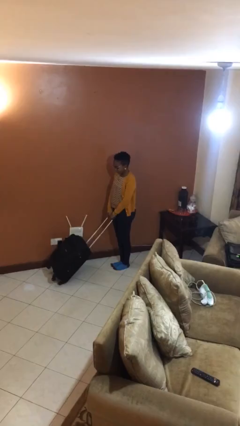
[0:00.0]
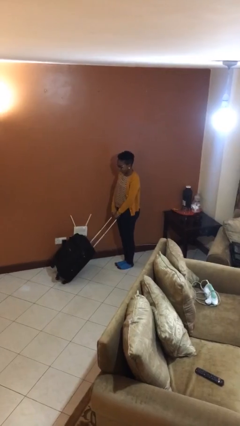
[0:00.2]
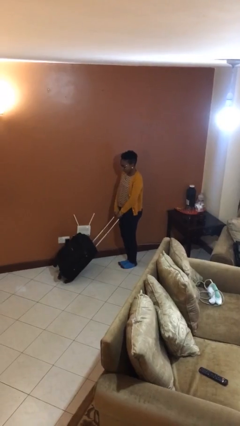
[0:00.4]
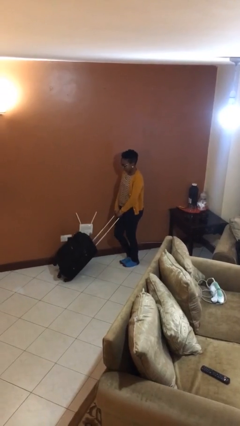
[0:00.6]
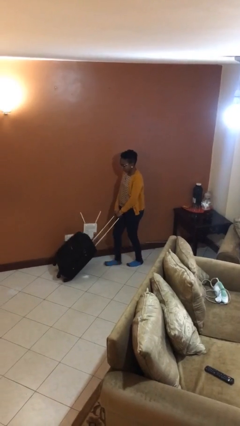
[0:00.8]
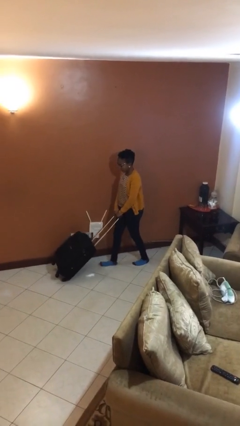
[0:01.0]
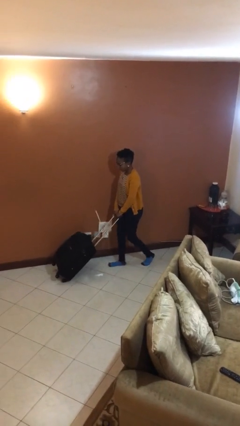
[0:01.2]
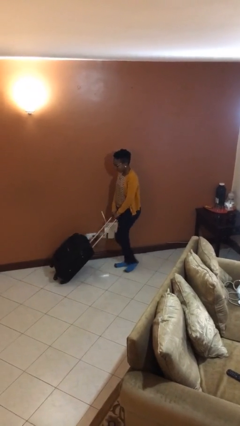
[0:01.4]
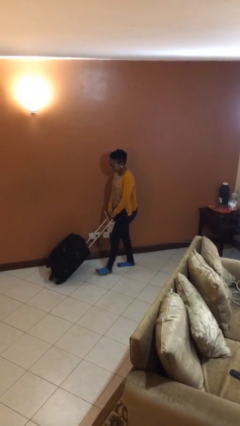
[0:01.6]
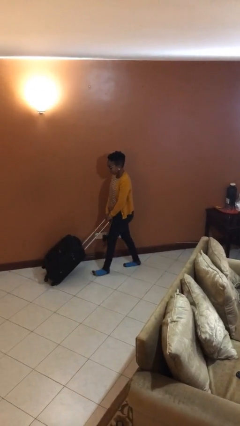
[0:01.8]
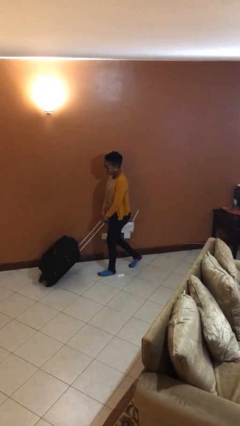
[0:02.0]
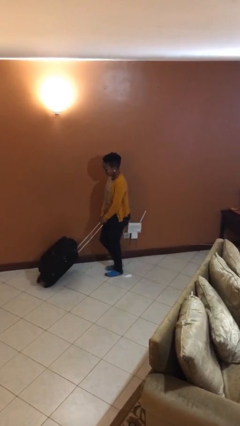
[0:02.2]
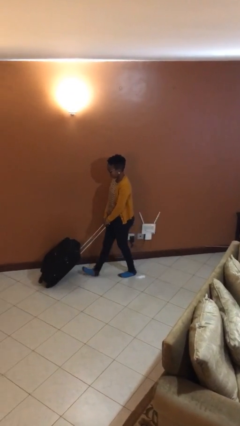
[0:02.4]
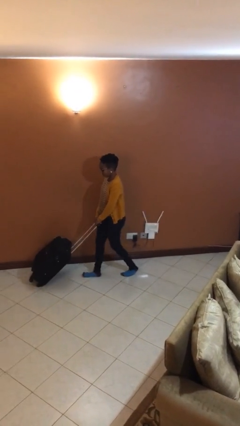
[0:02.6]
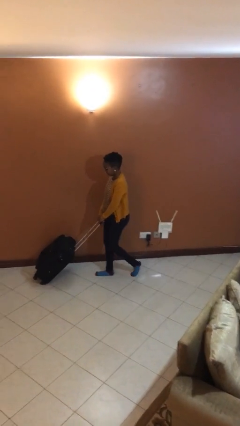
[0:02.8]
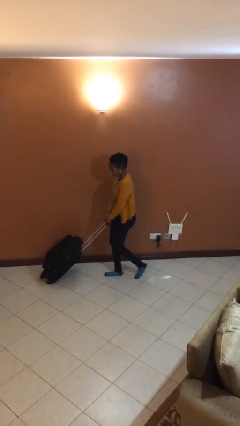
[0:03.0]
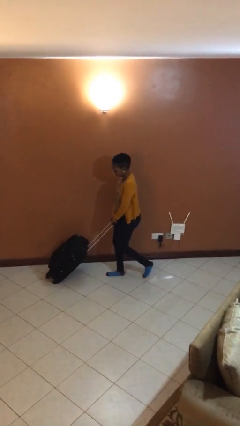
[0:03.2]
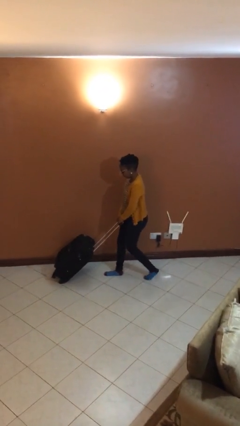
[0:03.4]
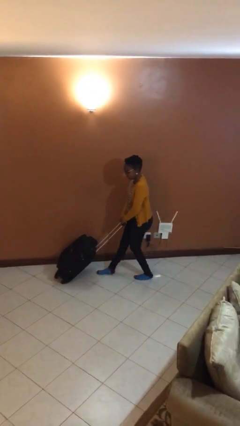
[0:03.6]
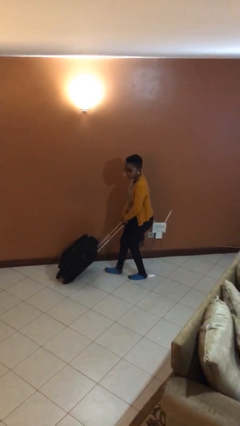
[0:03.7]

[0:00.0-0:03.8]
person pushes wheeled cart

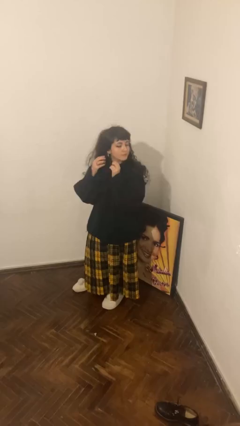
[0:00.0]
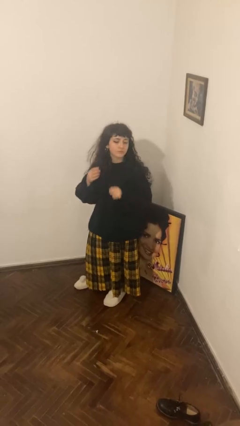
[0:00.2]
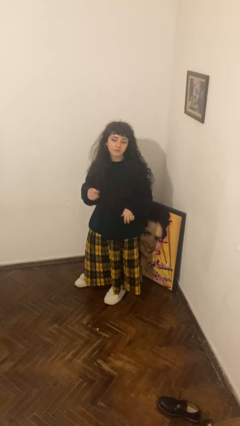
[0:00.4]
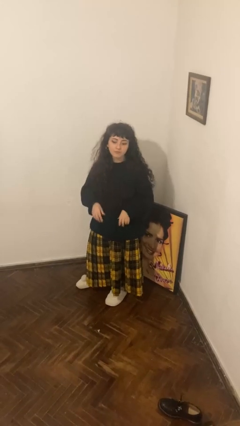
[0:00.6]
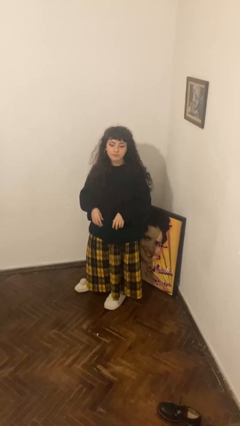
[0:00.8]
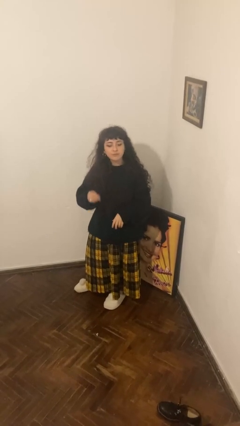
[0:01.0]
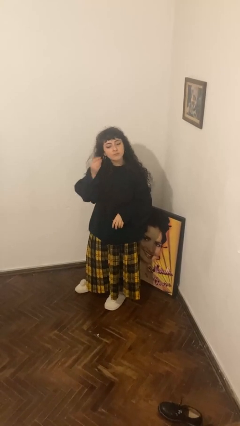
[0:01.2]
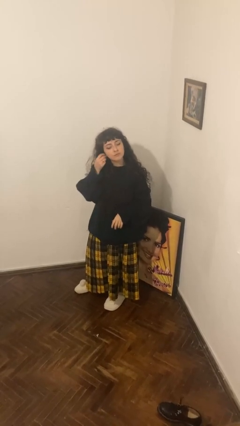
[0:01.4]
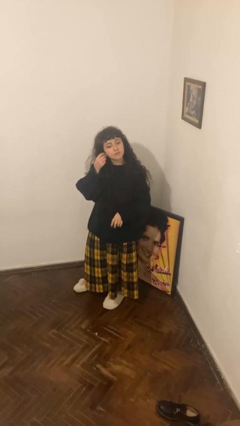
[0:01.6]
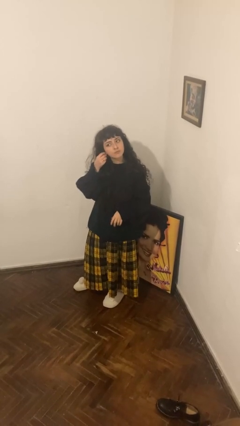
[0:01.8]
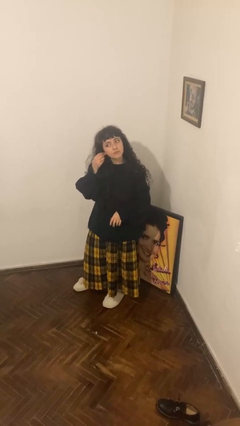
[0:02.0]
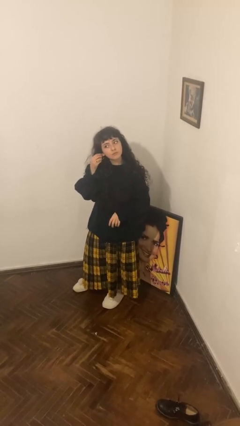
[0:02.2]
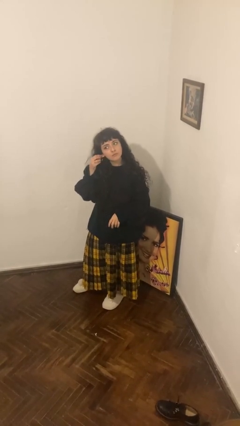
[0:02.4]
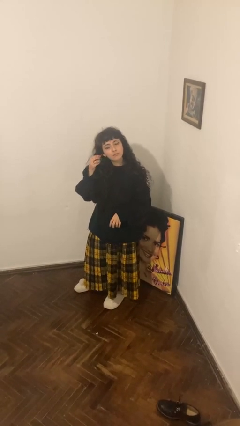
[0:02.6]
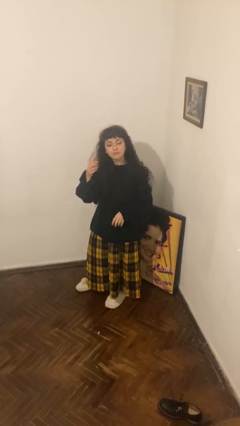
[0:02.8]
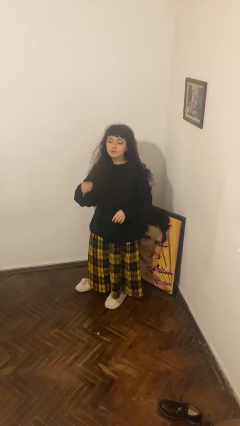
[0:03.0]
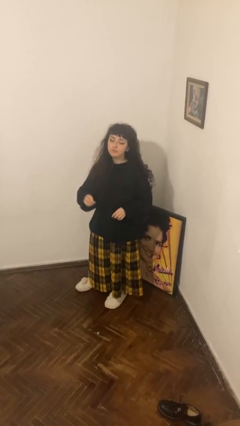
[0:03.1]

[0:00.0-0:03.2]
person takes off earrings

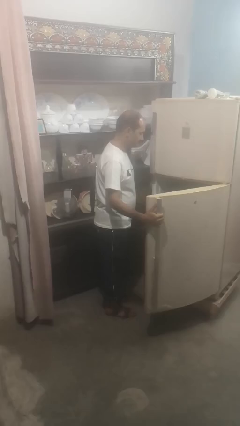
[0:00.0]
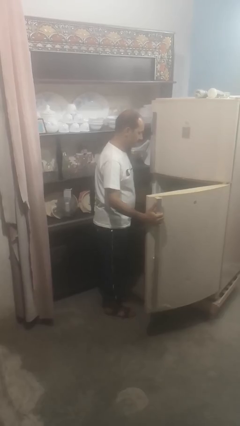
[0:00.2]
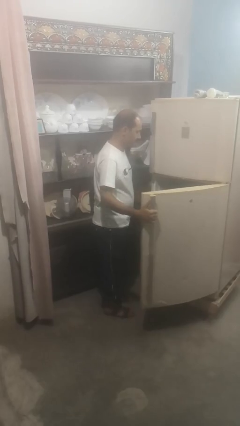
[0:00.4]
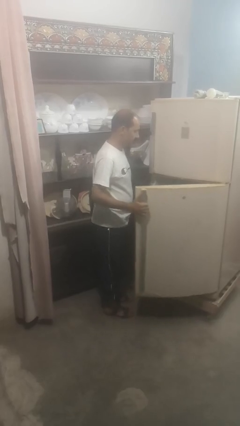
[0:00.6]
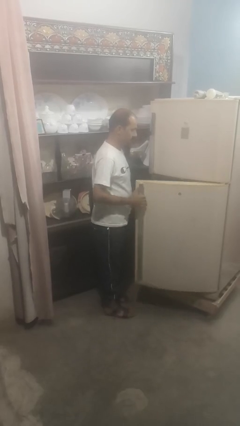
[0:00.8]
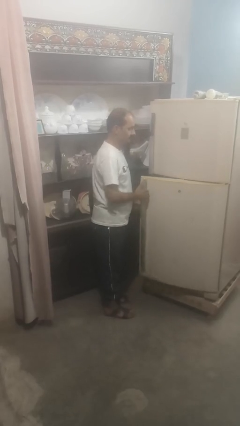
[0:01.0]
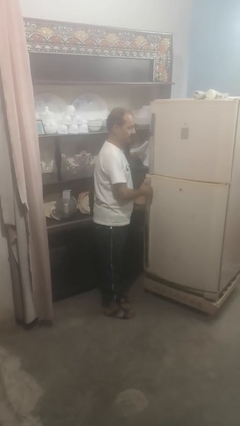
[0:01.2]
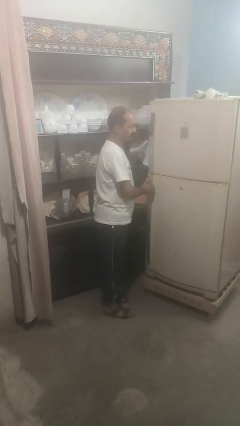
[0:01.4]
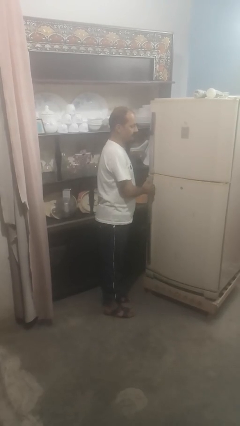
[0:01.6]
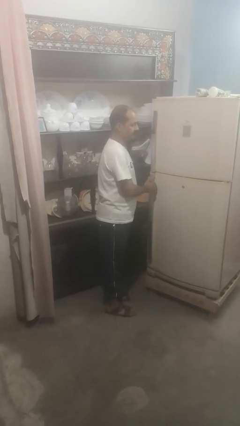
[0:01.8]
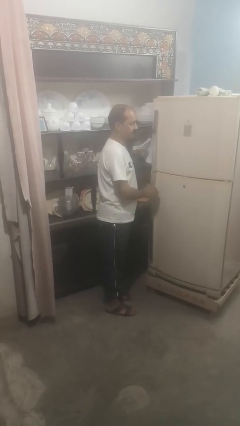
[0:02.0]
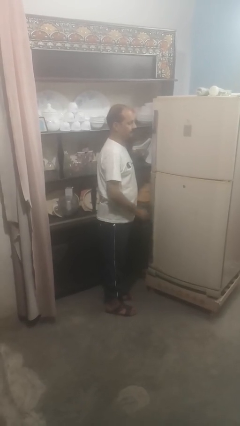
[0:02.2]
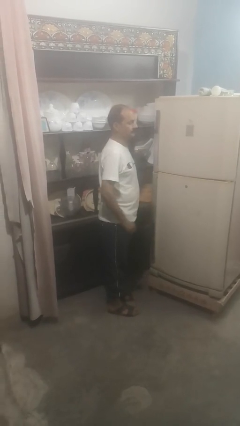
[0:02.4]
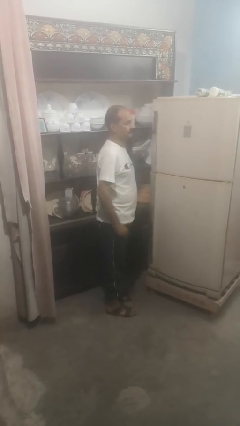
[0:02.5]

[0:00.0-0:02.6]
person closes refrigerator

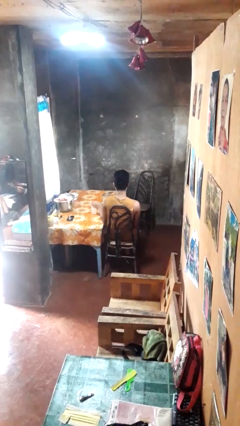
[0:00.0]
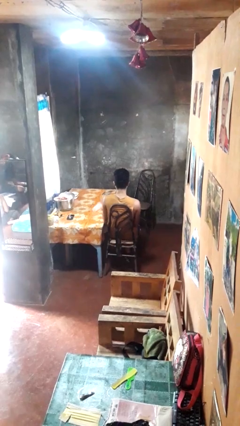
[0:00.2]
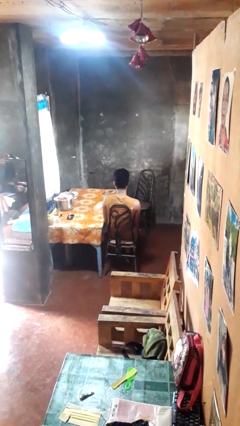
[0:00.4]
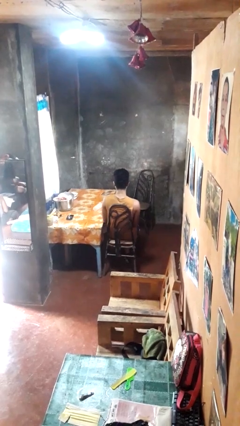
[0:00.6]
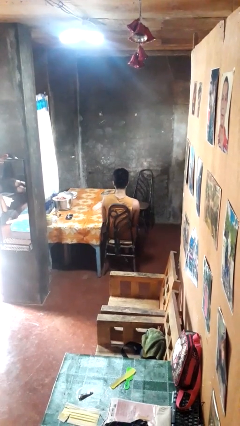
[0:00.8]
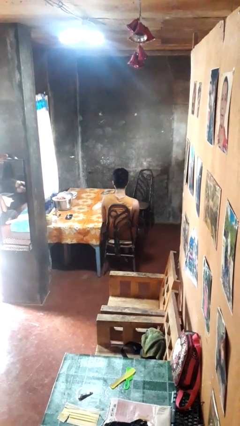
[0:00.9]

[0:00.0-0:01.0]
person knocks over glass

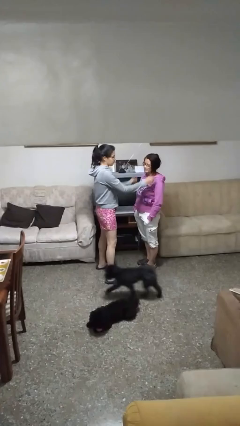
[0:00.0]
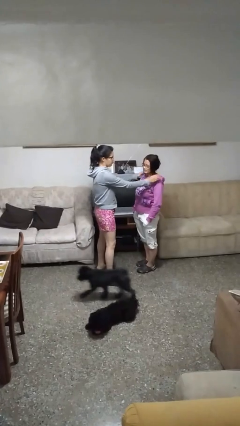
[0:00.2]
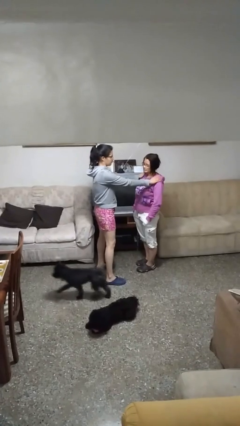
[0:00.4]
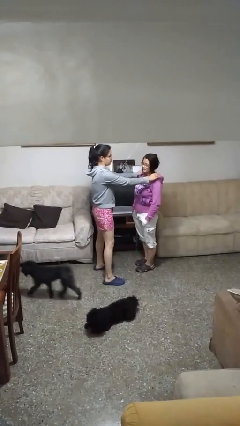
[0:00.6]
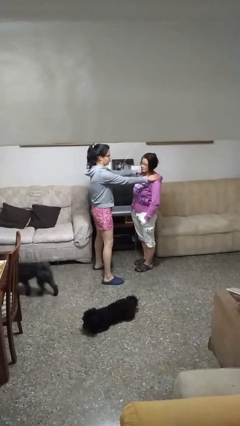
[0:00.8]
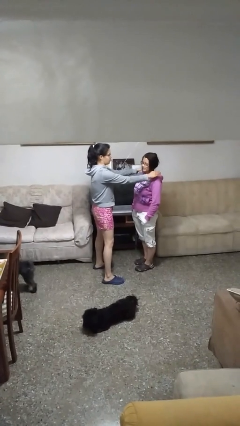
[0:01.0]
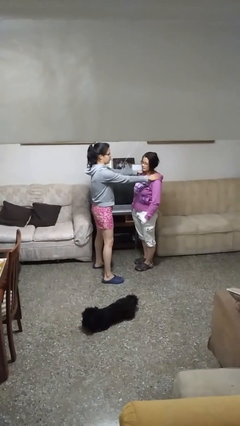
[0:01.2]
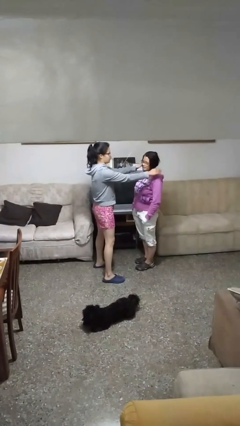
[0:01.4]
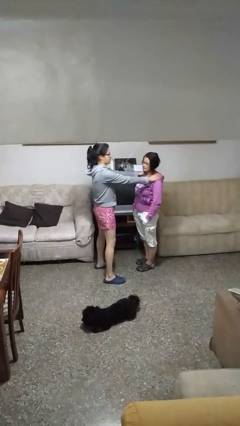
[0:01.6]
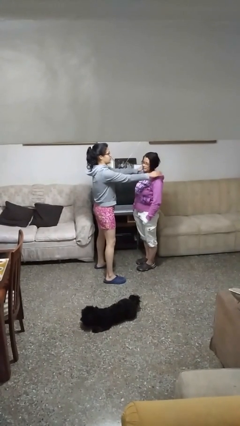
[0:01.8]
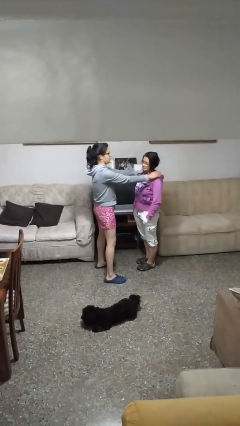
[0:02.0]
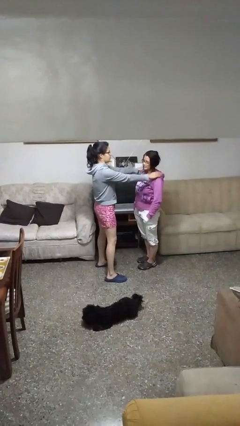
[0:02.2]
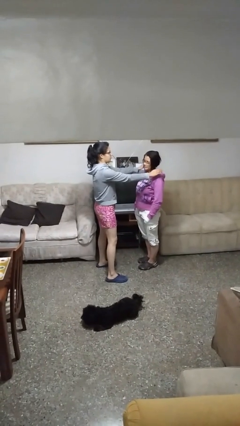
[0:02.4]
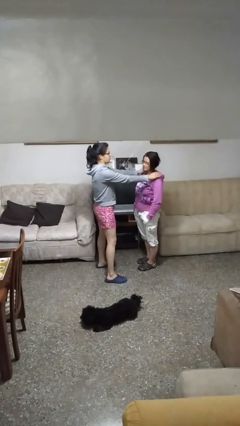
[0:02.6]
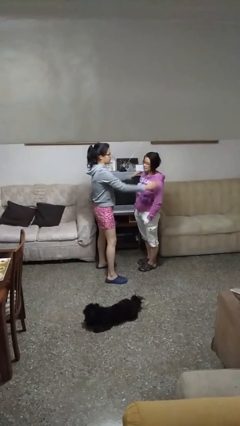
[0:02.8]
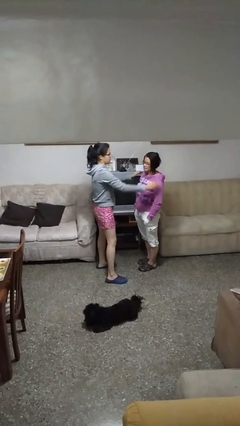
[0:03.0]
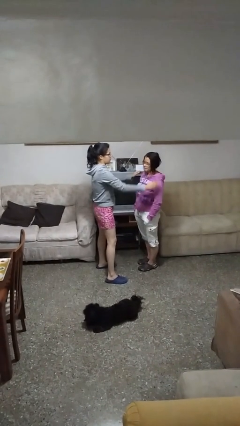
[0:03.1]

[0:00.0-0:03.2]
person pounds shoulders of person

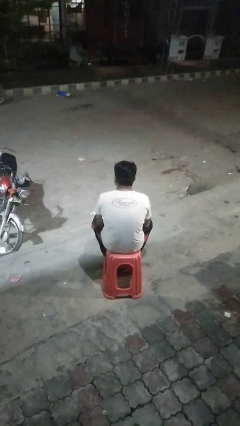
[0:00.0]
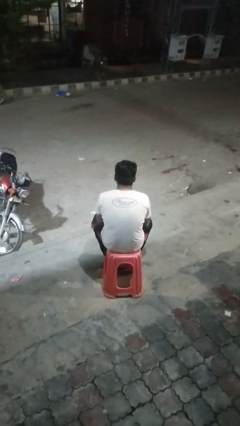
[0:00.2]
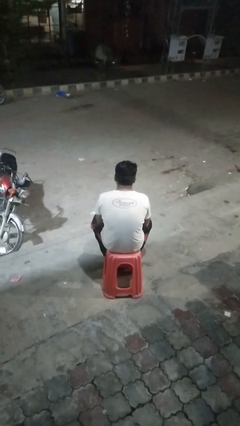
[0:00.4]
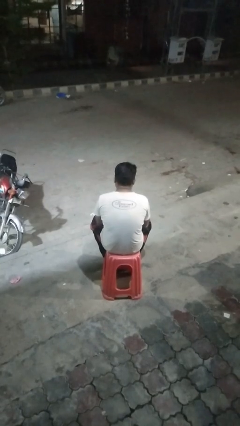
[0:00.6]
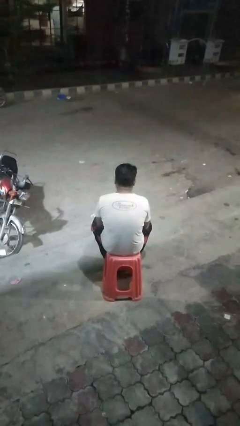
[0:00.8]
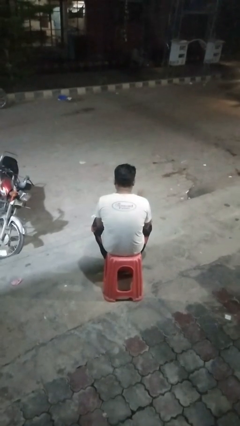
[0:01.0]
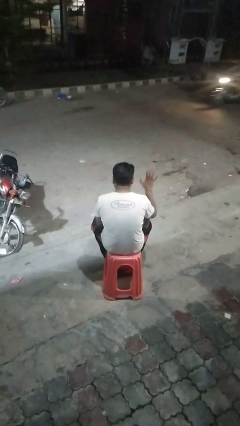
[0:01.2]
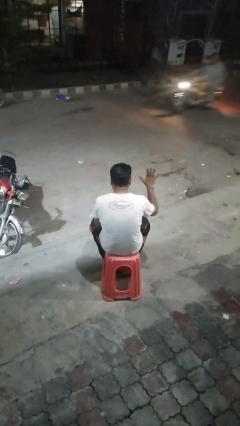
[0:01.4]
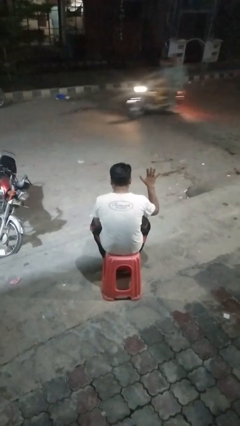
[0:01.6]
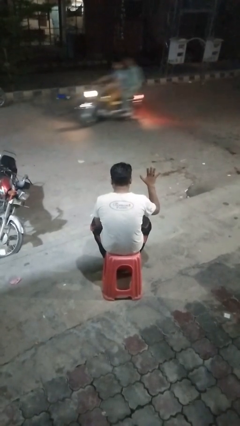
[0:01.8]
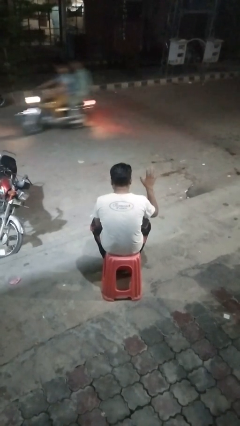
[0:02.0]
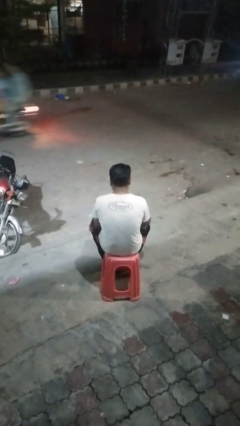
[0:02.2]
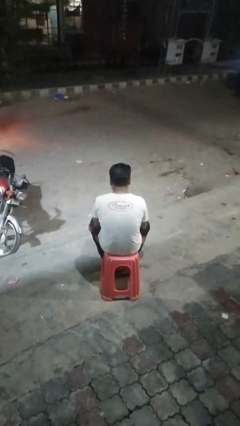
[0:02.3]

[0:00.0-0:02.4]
person gestures number five

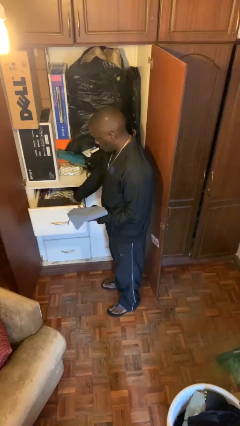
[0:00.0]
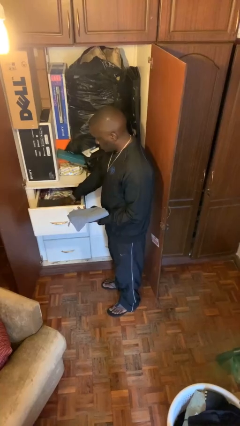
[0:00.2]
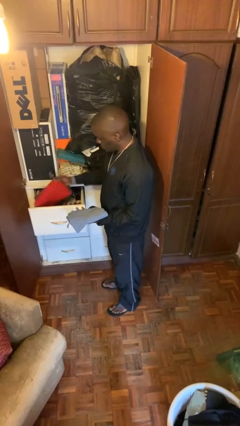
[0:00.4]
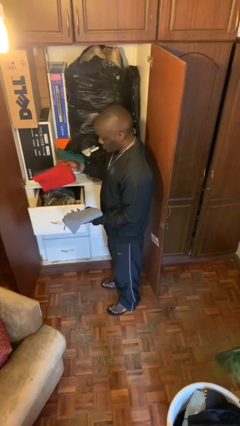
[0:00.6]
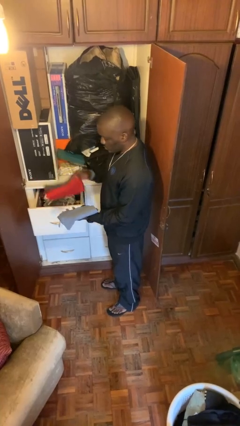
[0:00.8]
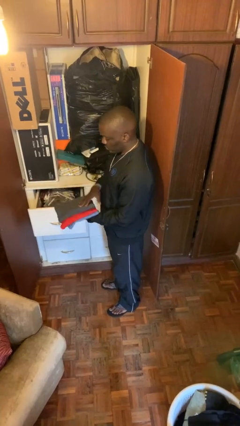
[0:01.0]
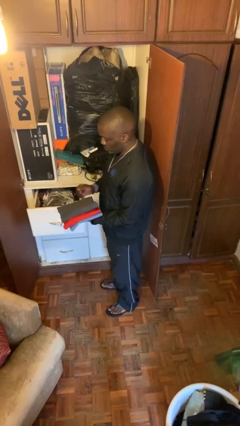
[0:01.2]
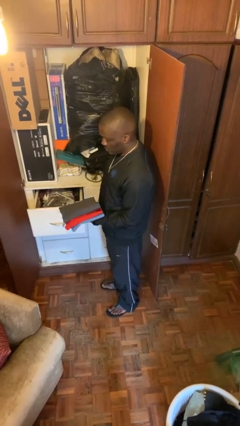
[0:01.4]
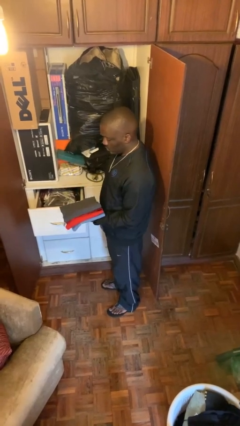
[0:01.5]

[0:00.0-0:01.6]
person takes clothes from dresser
